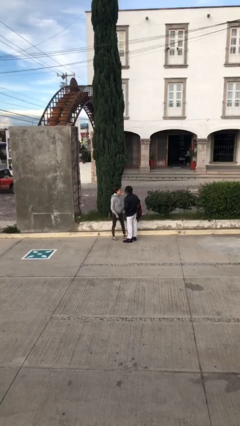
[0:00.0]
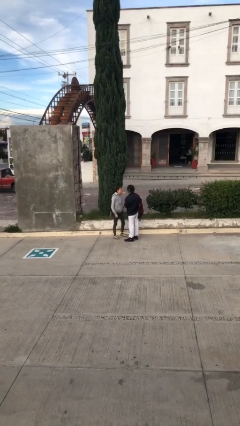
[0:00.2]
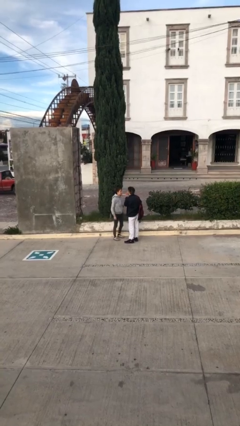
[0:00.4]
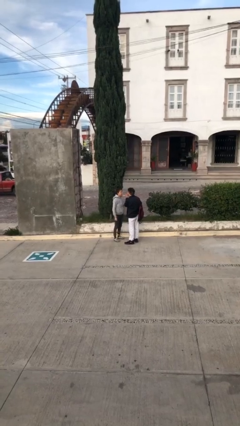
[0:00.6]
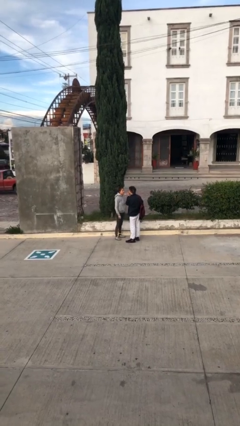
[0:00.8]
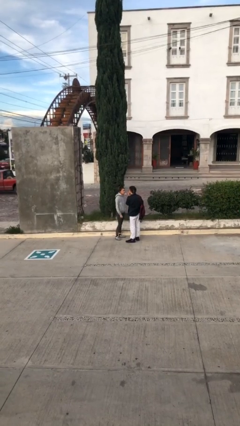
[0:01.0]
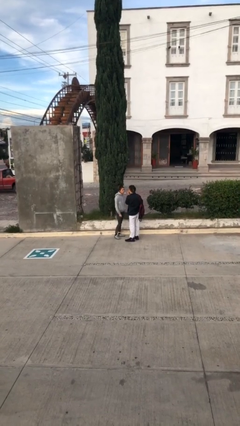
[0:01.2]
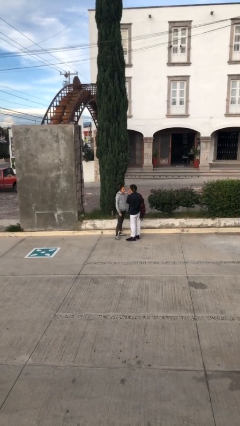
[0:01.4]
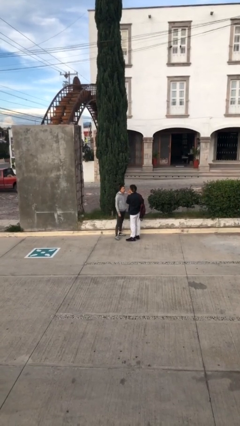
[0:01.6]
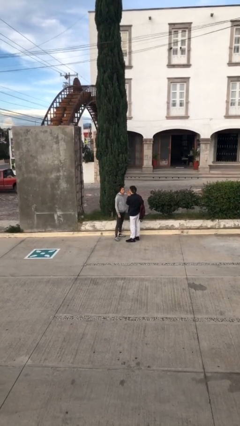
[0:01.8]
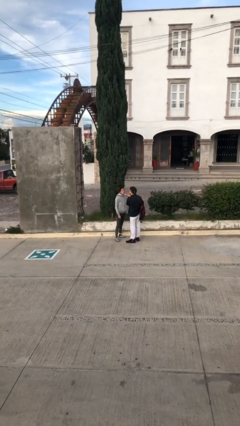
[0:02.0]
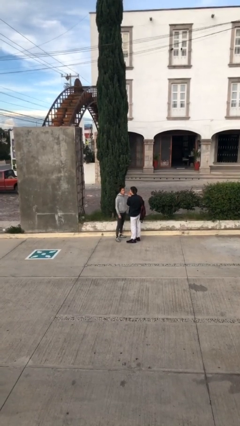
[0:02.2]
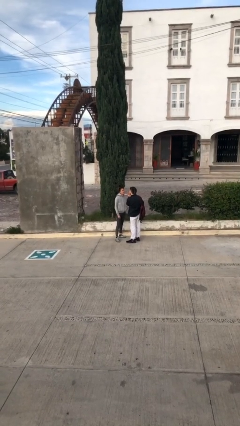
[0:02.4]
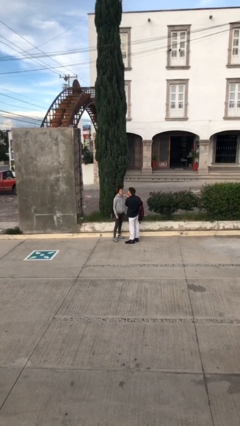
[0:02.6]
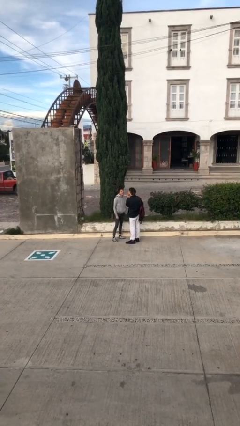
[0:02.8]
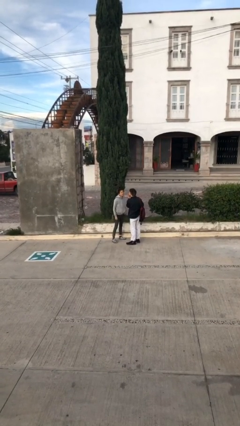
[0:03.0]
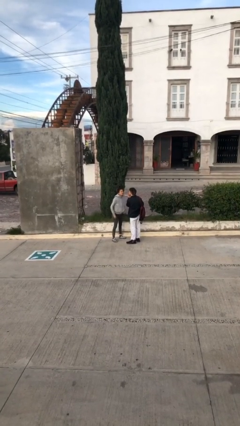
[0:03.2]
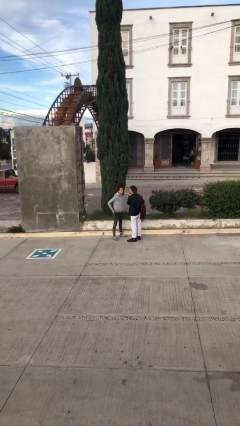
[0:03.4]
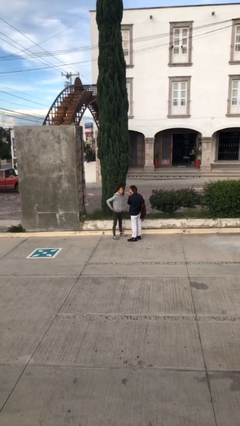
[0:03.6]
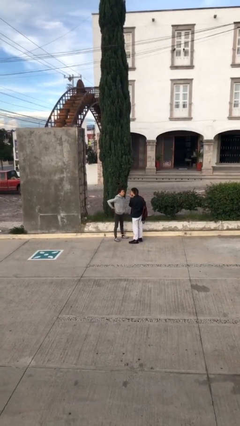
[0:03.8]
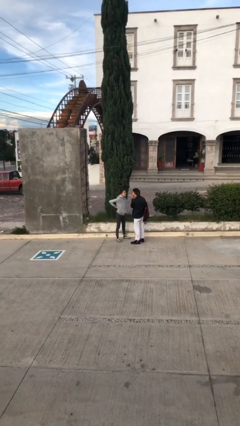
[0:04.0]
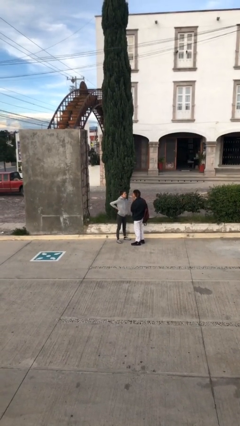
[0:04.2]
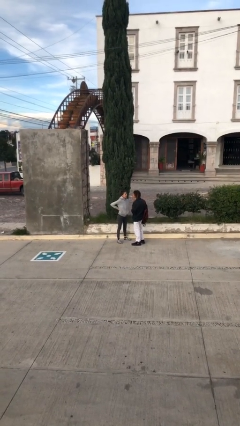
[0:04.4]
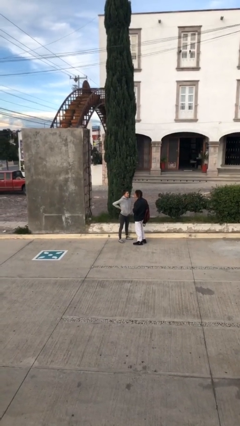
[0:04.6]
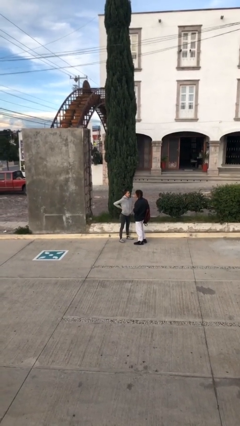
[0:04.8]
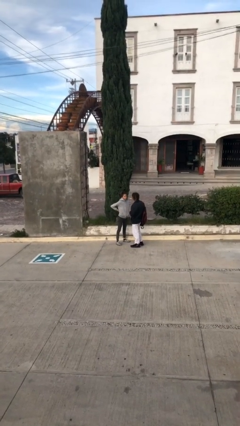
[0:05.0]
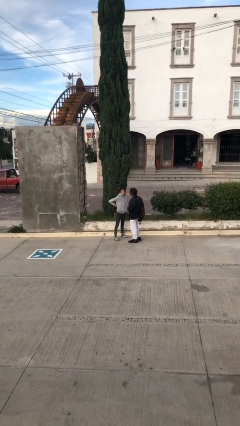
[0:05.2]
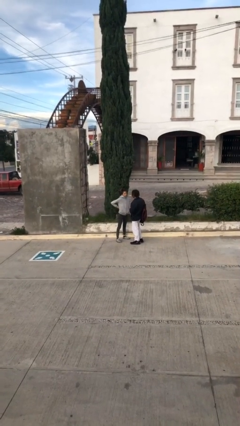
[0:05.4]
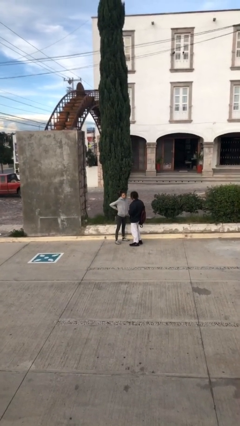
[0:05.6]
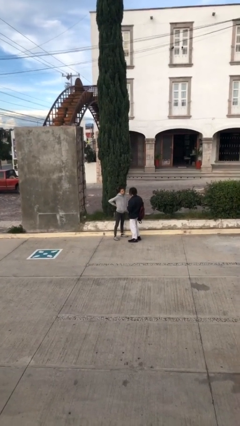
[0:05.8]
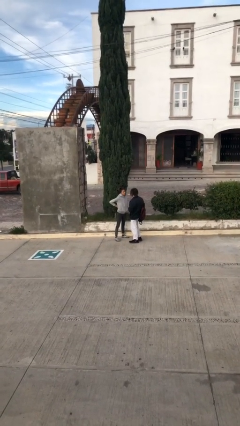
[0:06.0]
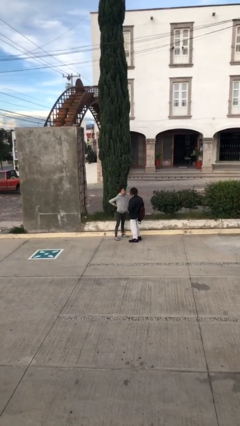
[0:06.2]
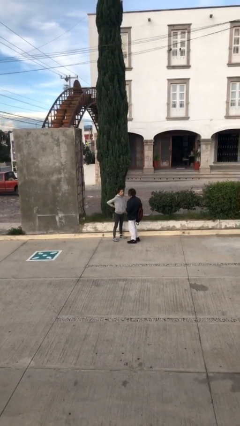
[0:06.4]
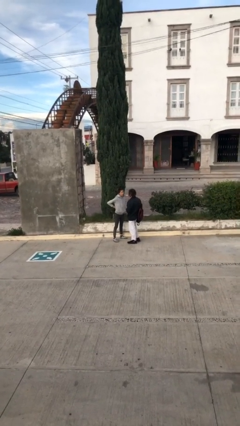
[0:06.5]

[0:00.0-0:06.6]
person talks to person

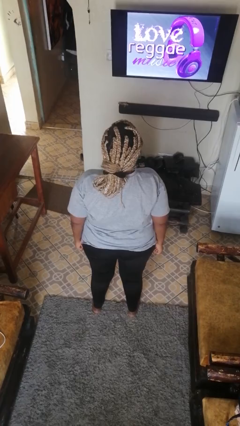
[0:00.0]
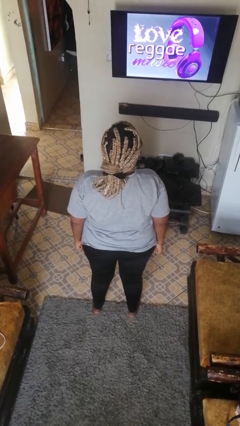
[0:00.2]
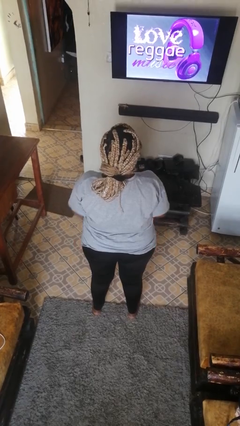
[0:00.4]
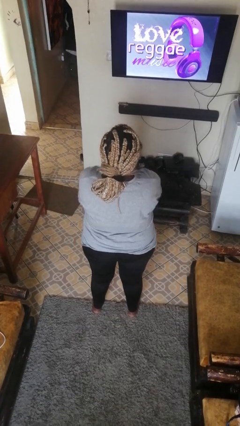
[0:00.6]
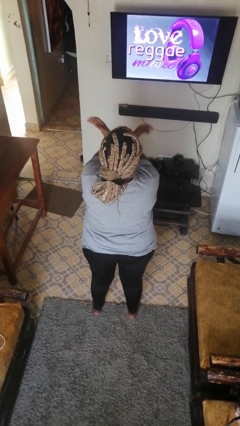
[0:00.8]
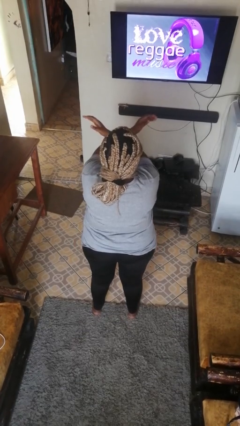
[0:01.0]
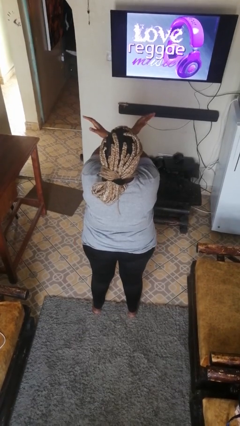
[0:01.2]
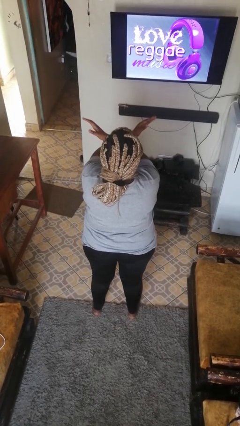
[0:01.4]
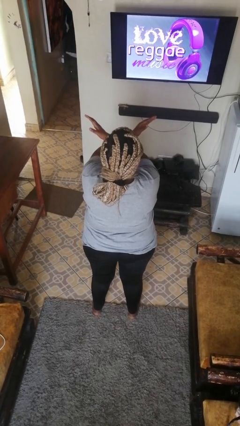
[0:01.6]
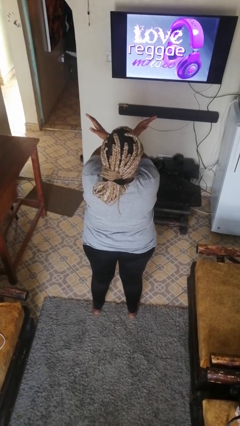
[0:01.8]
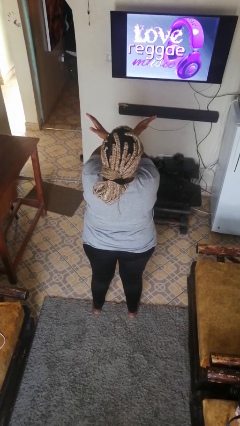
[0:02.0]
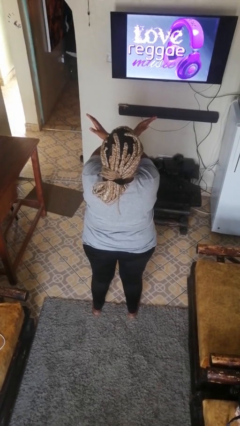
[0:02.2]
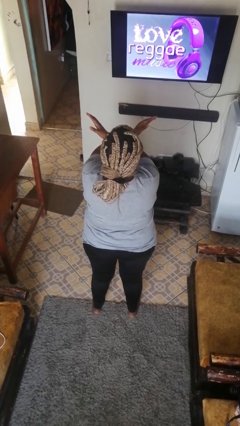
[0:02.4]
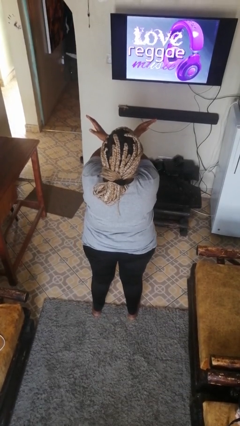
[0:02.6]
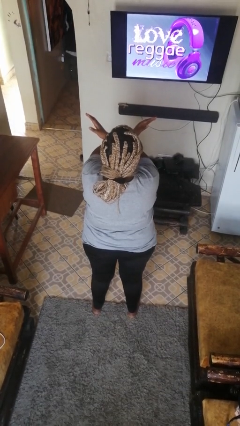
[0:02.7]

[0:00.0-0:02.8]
person gestures arms x

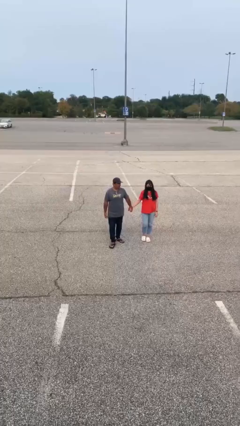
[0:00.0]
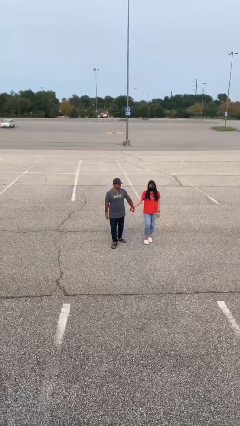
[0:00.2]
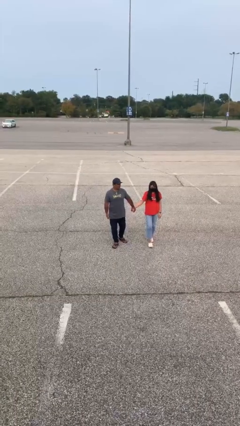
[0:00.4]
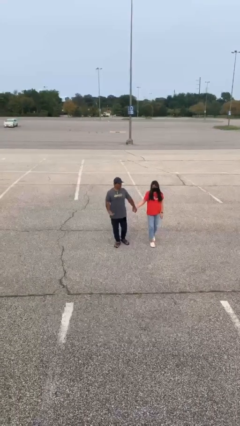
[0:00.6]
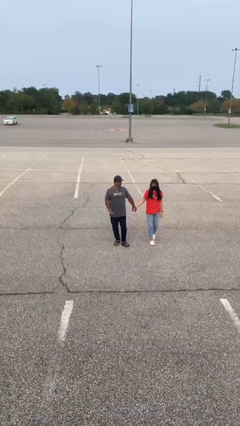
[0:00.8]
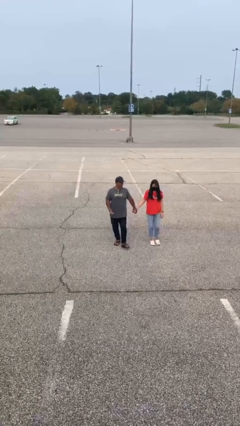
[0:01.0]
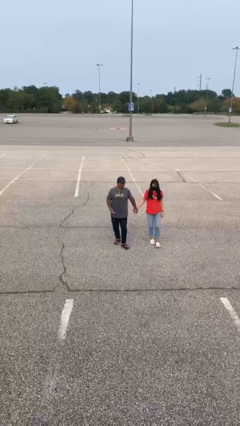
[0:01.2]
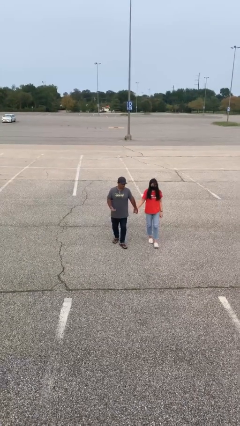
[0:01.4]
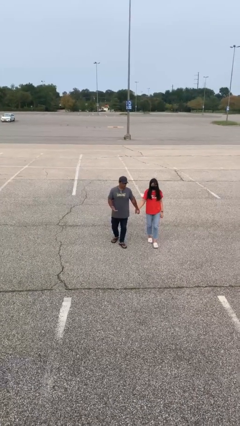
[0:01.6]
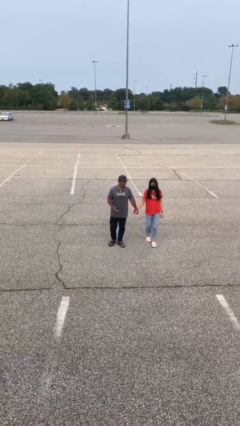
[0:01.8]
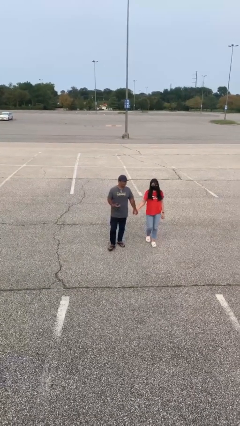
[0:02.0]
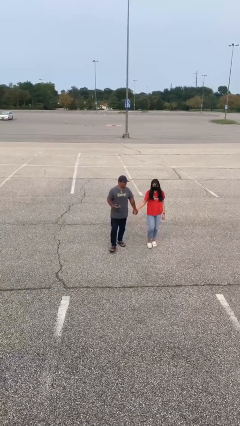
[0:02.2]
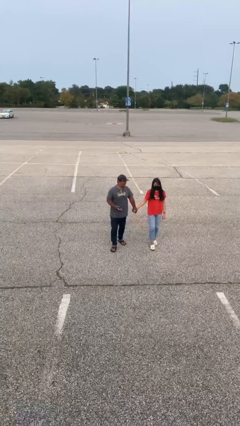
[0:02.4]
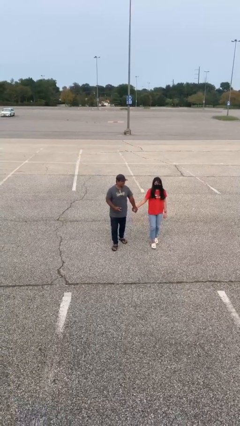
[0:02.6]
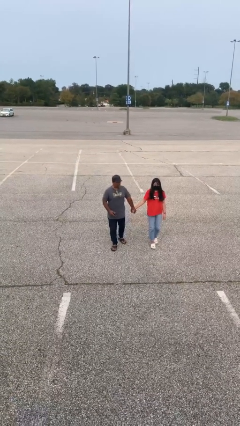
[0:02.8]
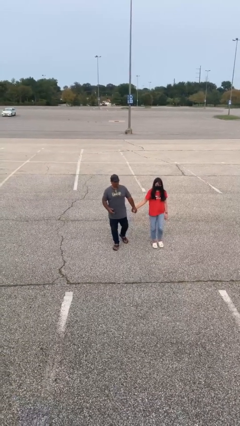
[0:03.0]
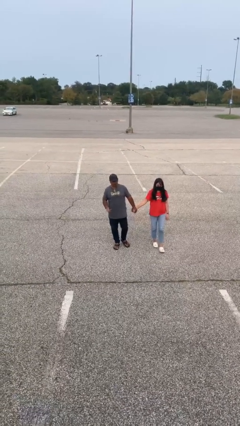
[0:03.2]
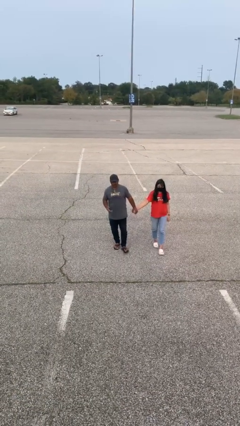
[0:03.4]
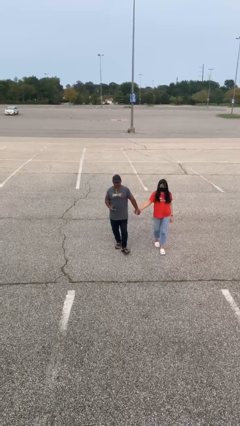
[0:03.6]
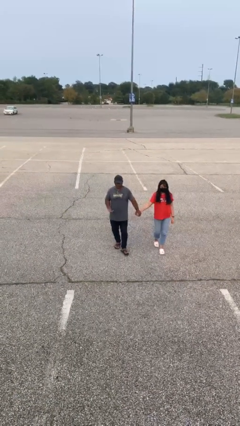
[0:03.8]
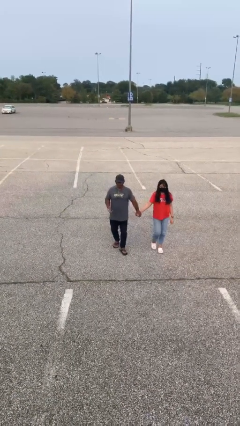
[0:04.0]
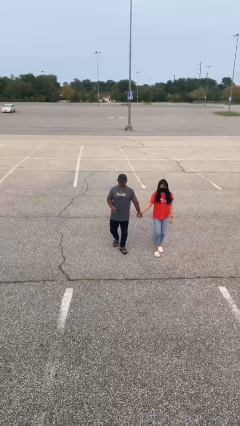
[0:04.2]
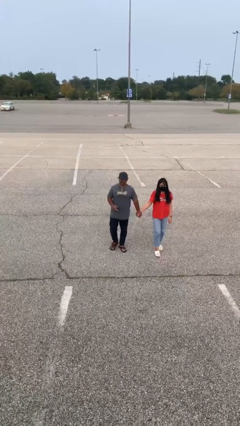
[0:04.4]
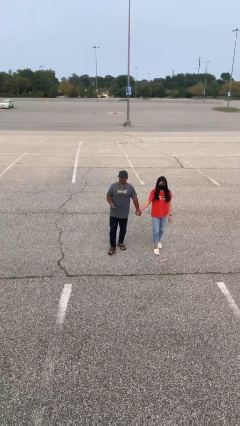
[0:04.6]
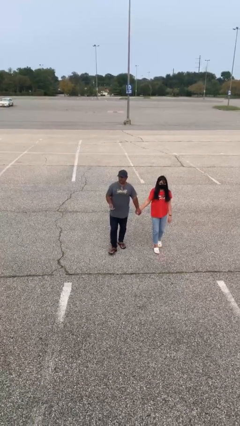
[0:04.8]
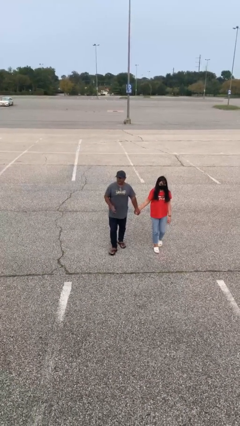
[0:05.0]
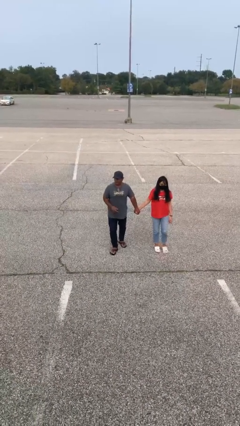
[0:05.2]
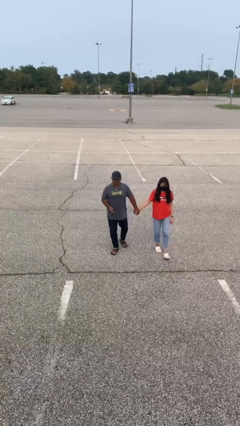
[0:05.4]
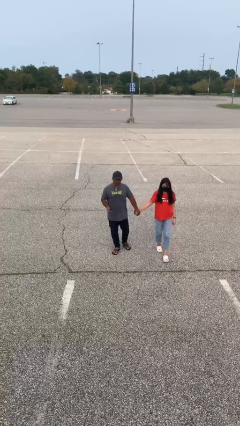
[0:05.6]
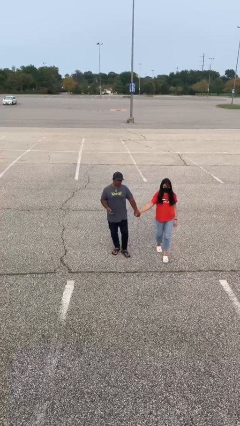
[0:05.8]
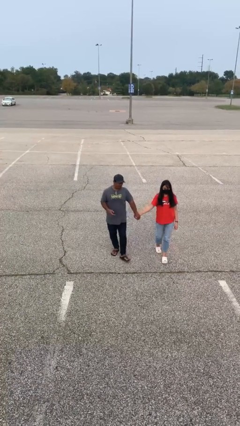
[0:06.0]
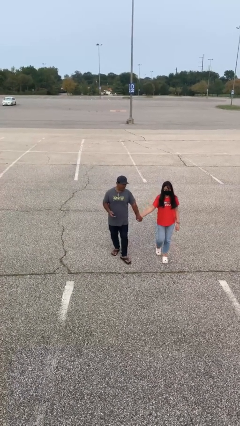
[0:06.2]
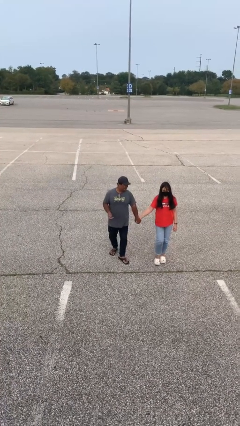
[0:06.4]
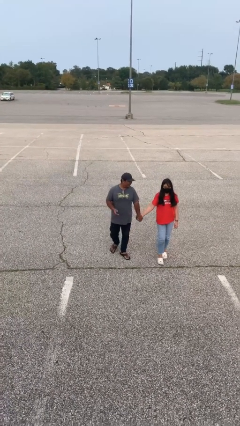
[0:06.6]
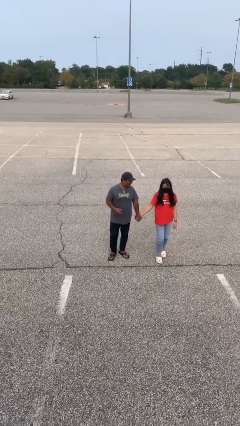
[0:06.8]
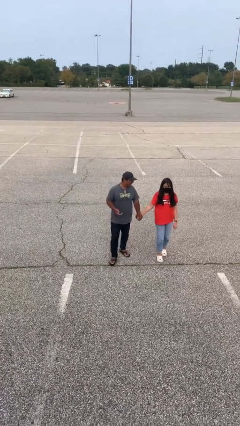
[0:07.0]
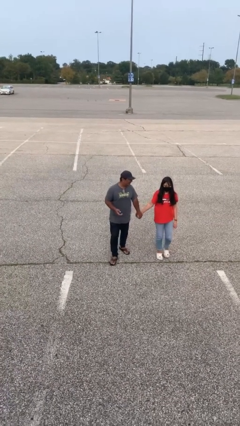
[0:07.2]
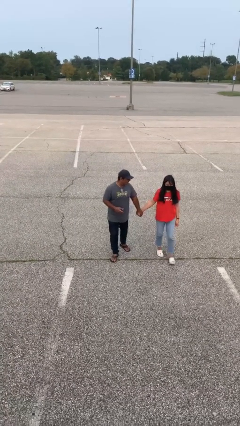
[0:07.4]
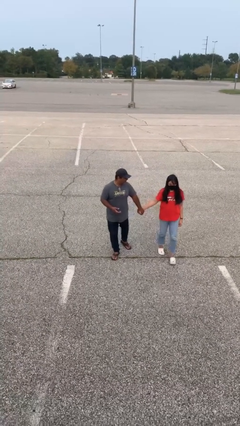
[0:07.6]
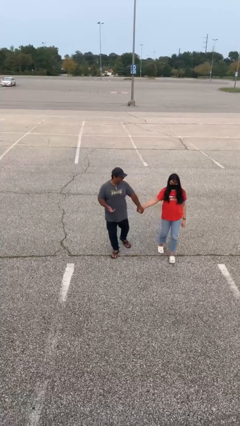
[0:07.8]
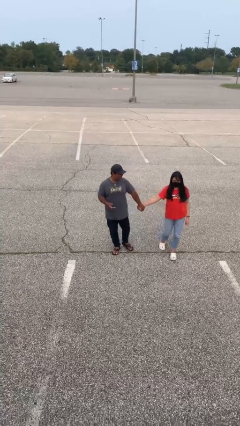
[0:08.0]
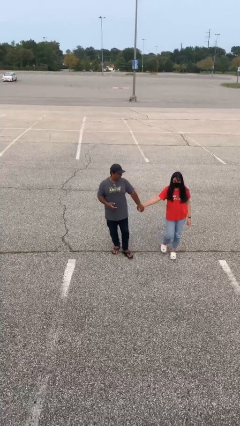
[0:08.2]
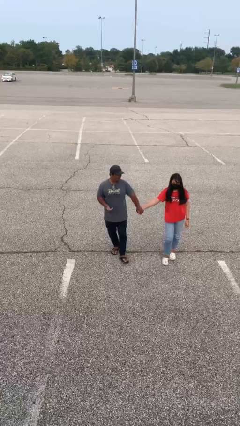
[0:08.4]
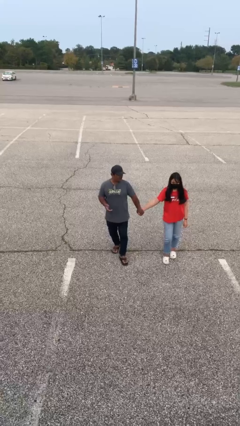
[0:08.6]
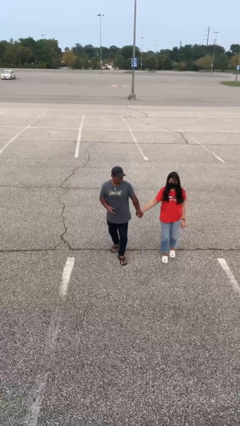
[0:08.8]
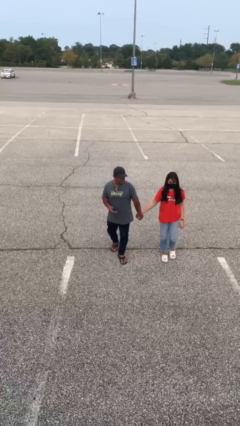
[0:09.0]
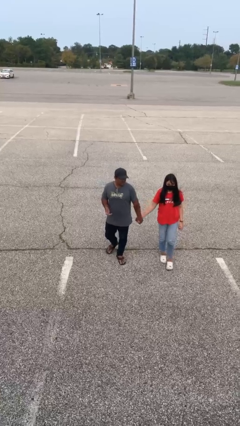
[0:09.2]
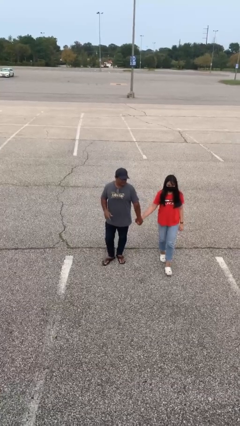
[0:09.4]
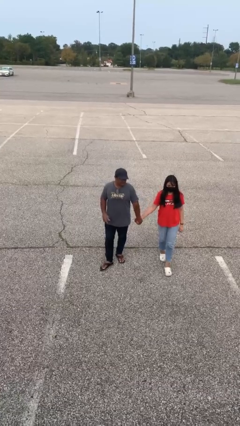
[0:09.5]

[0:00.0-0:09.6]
person holds hand
